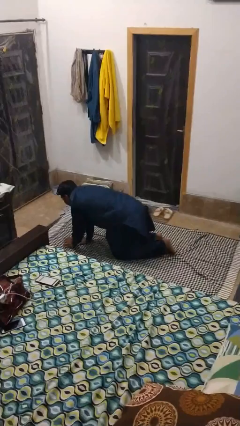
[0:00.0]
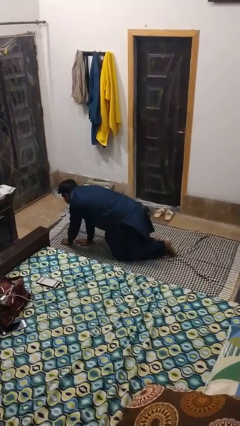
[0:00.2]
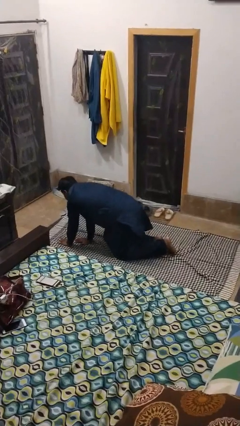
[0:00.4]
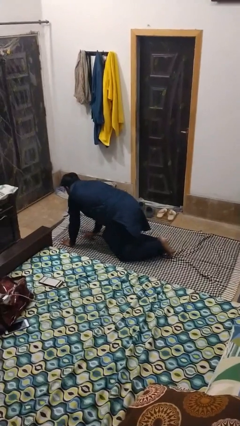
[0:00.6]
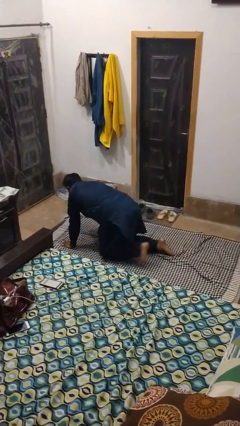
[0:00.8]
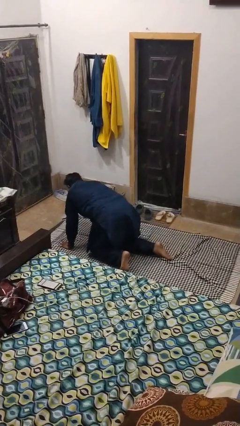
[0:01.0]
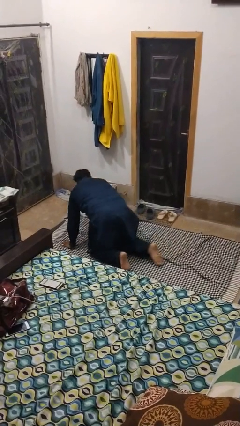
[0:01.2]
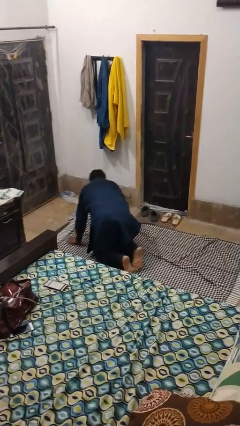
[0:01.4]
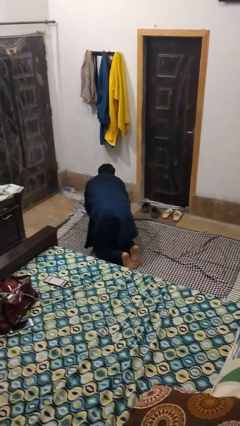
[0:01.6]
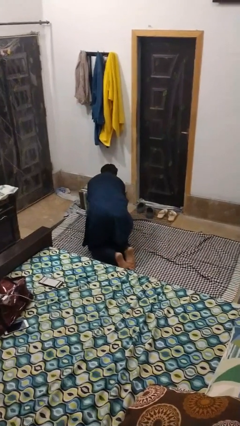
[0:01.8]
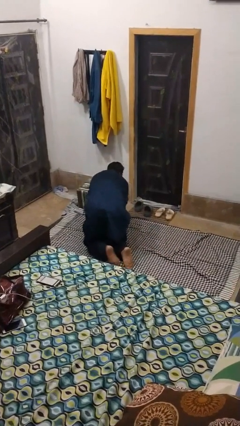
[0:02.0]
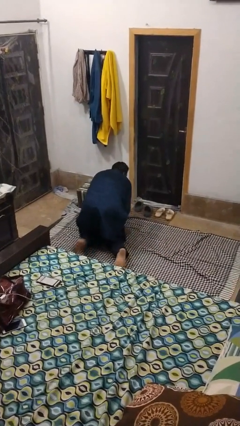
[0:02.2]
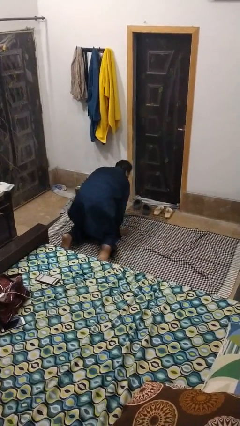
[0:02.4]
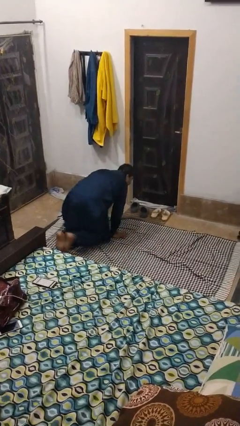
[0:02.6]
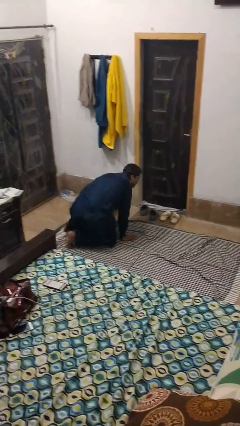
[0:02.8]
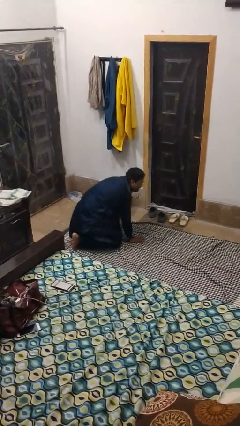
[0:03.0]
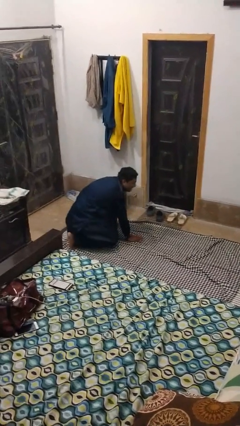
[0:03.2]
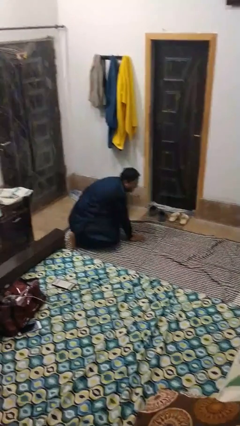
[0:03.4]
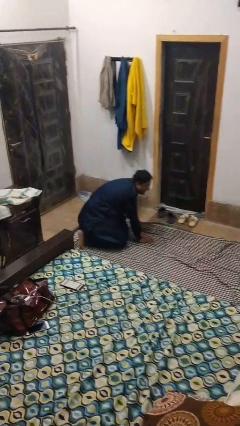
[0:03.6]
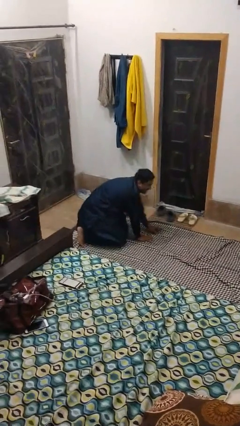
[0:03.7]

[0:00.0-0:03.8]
person crawls

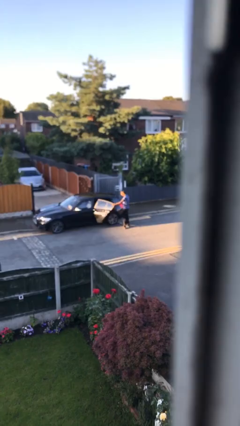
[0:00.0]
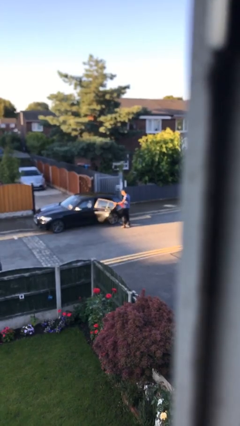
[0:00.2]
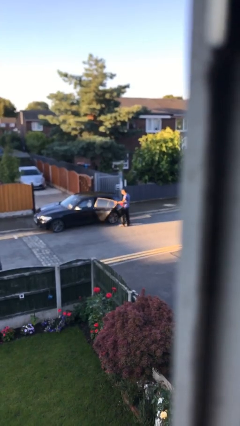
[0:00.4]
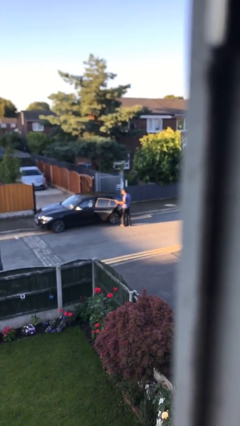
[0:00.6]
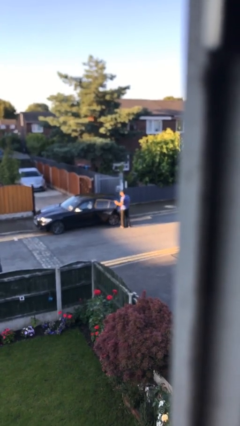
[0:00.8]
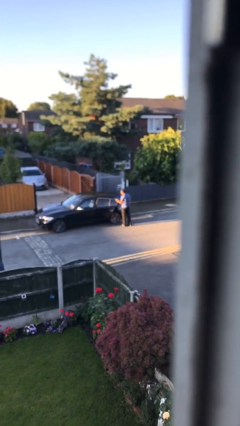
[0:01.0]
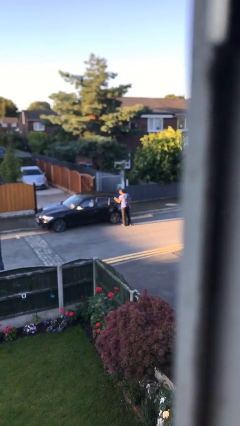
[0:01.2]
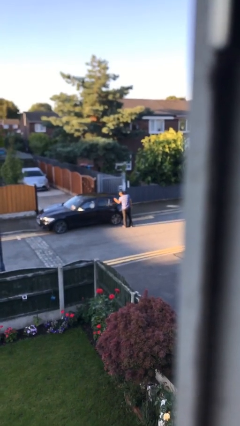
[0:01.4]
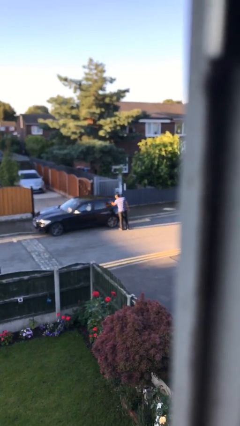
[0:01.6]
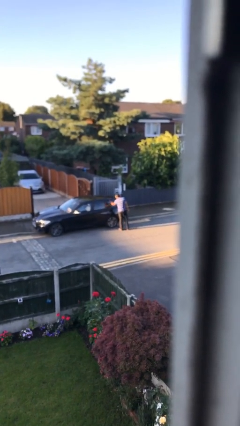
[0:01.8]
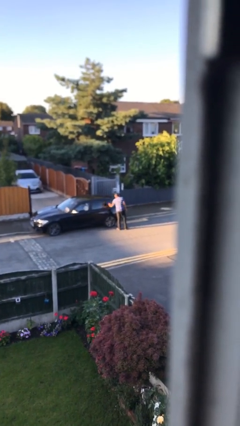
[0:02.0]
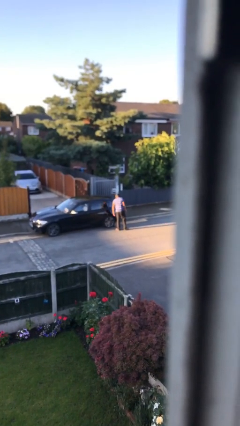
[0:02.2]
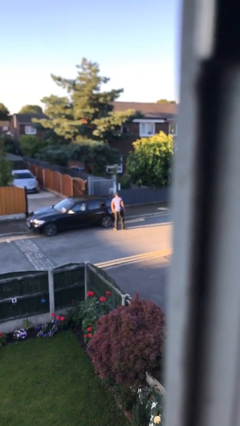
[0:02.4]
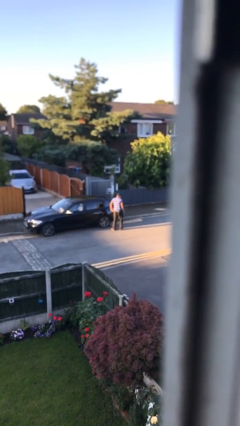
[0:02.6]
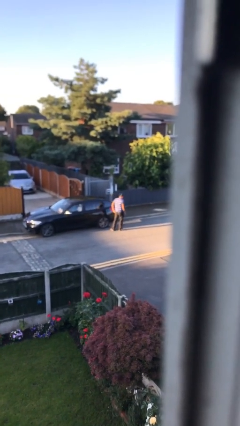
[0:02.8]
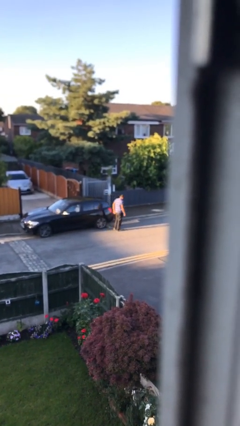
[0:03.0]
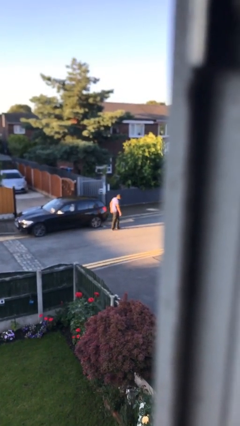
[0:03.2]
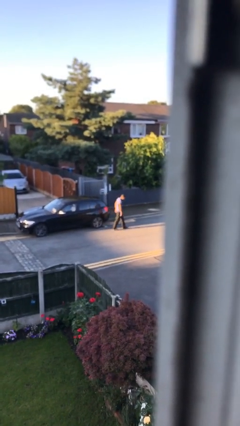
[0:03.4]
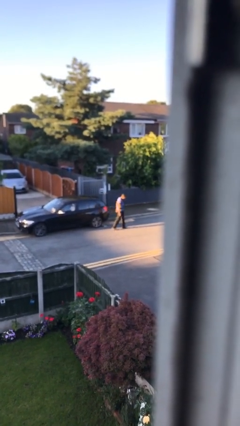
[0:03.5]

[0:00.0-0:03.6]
person closes car door

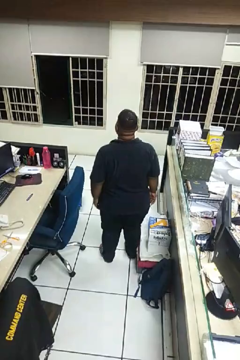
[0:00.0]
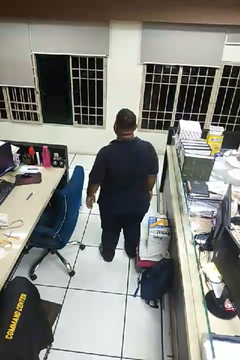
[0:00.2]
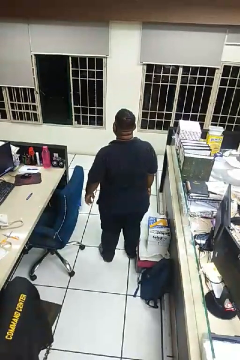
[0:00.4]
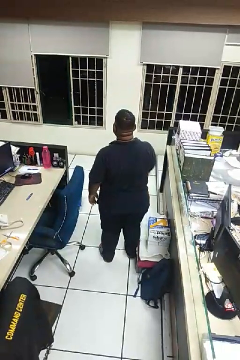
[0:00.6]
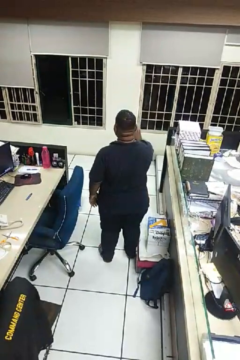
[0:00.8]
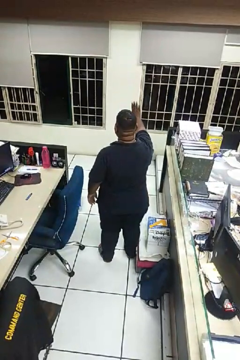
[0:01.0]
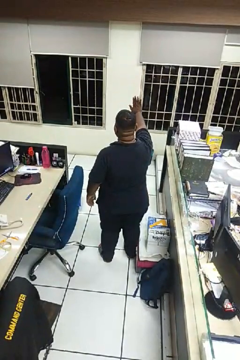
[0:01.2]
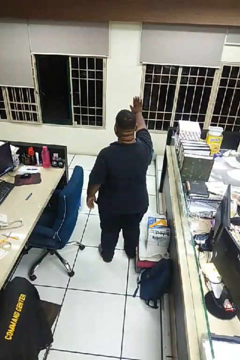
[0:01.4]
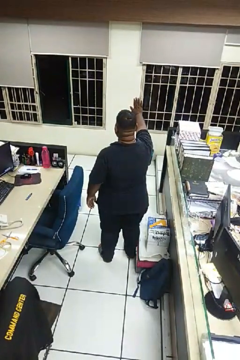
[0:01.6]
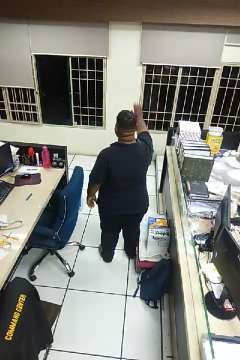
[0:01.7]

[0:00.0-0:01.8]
person gestures stop

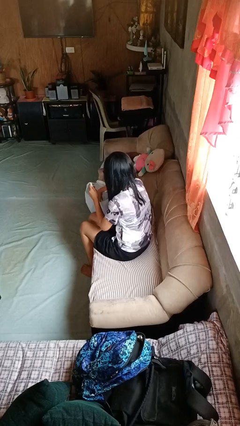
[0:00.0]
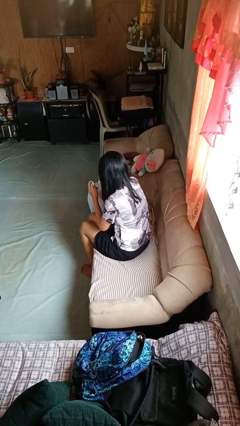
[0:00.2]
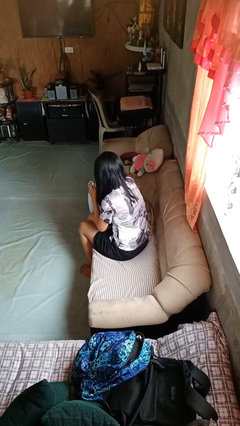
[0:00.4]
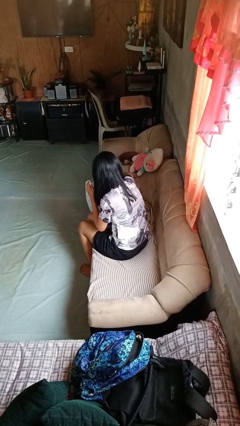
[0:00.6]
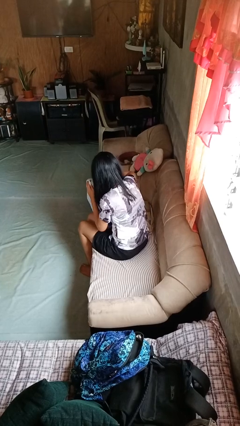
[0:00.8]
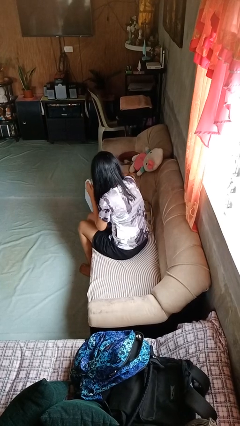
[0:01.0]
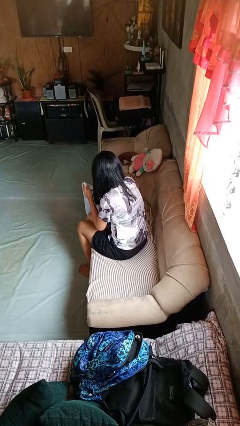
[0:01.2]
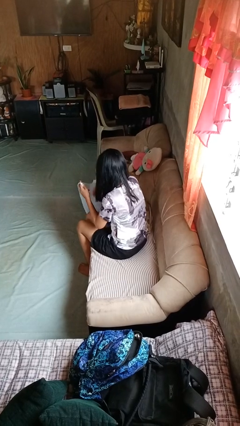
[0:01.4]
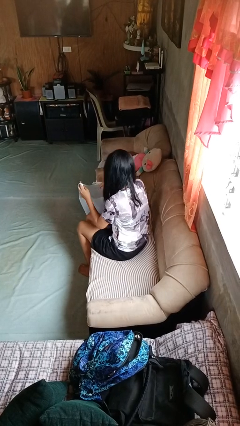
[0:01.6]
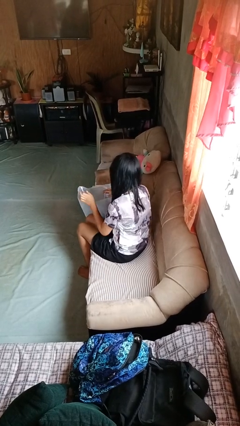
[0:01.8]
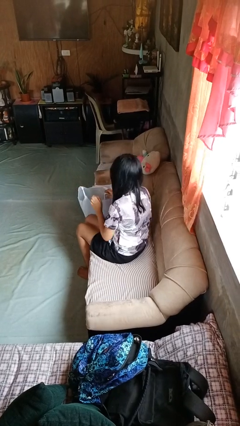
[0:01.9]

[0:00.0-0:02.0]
person searches in bag

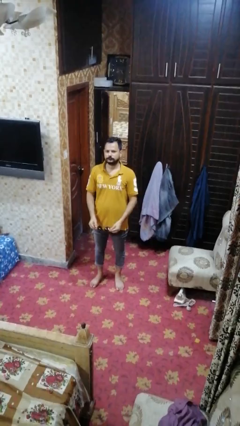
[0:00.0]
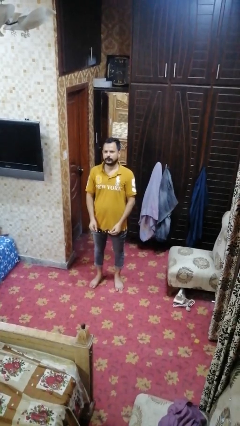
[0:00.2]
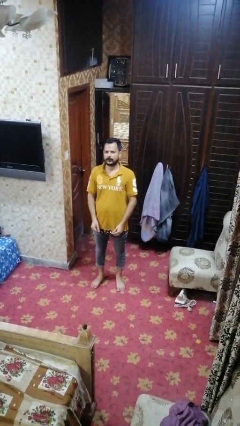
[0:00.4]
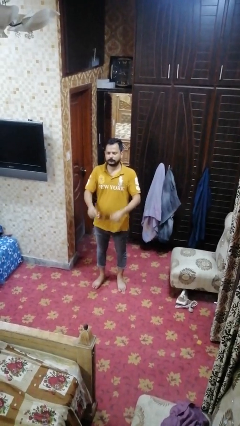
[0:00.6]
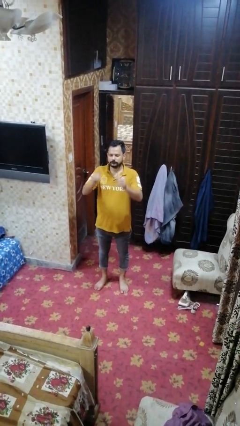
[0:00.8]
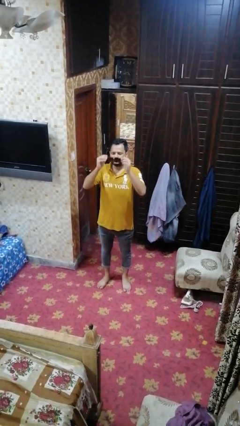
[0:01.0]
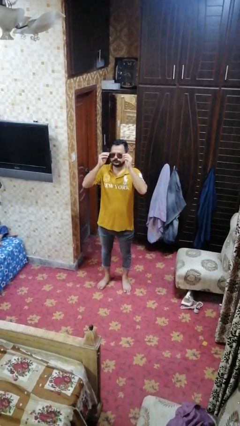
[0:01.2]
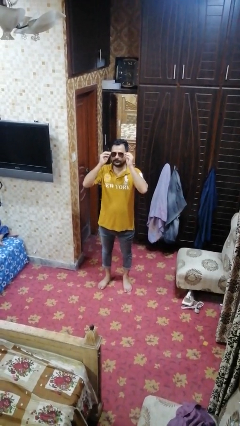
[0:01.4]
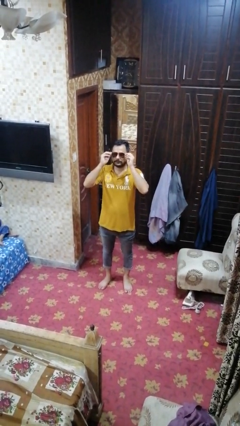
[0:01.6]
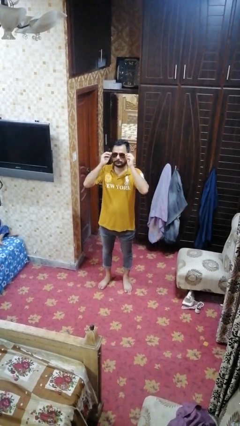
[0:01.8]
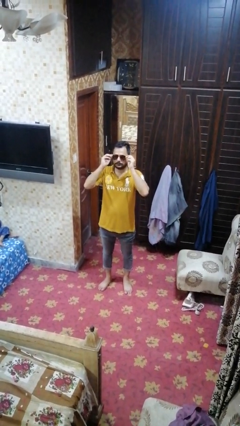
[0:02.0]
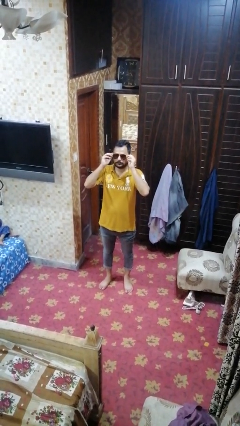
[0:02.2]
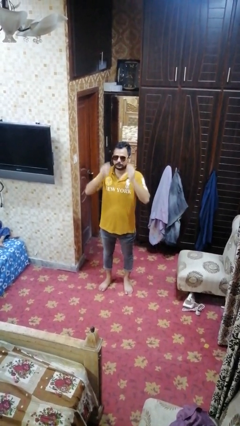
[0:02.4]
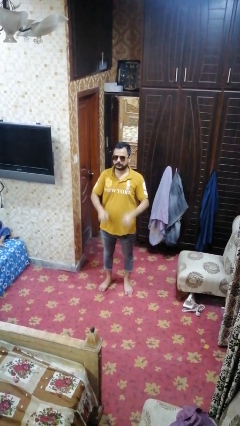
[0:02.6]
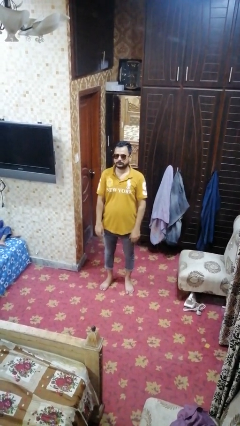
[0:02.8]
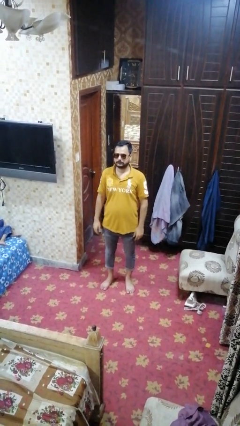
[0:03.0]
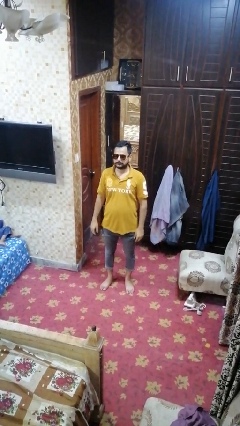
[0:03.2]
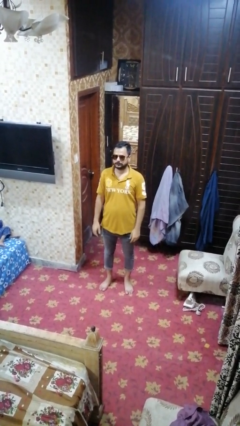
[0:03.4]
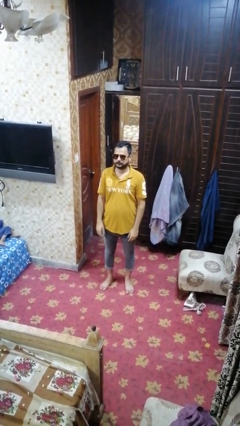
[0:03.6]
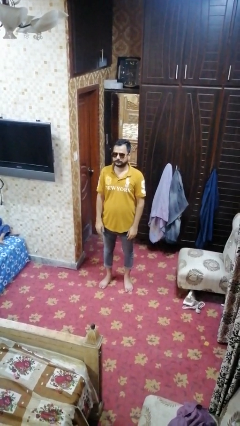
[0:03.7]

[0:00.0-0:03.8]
person puts on sunglasses

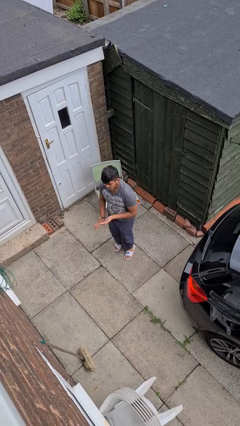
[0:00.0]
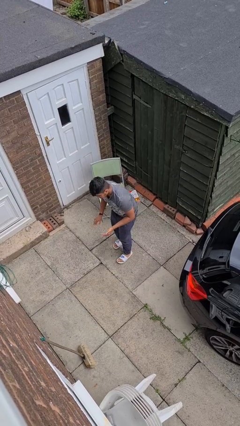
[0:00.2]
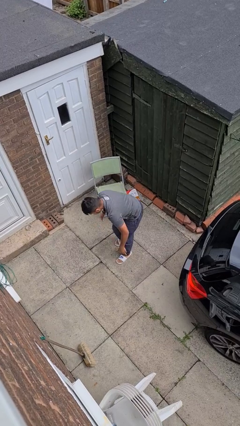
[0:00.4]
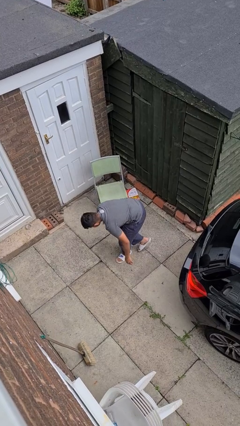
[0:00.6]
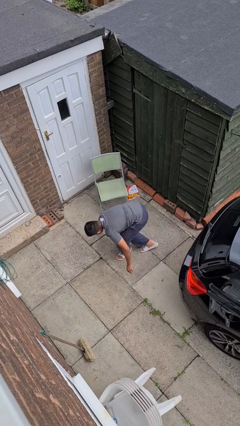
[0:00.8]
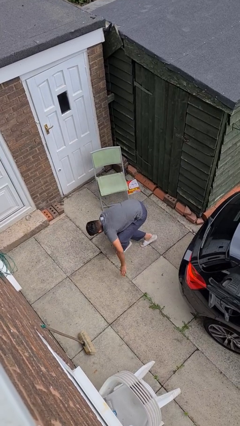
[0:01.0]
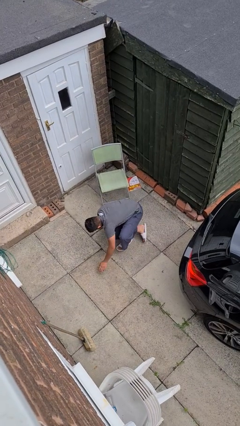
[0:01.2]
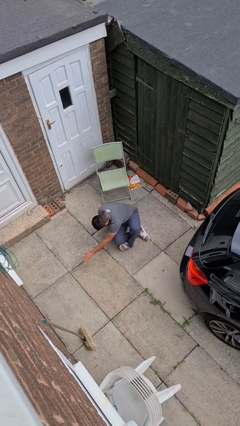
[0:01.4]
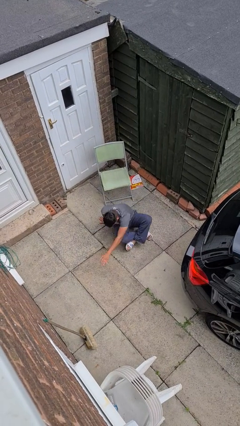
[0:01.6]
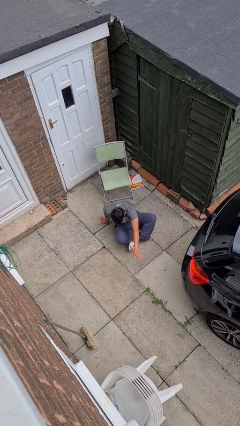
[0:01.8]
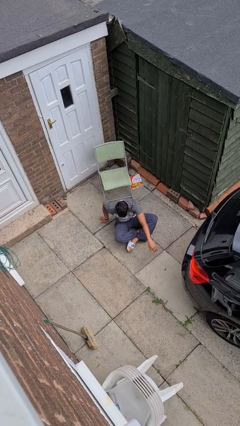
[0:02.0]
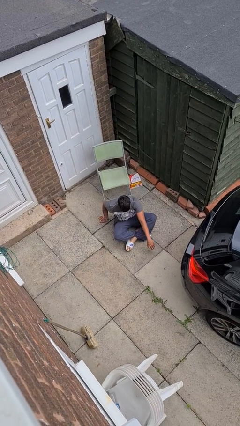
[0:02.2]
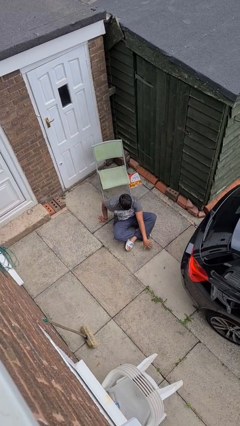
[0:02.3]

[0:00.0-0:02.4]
person sits crisscross

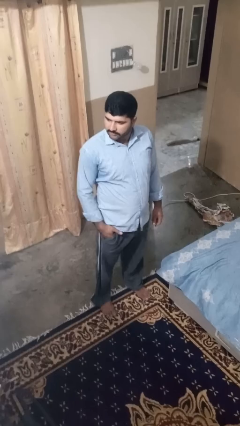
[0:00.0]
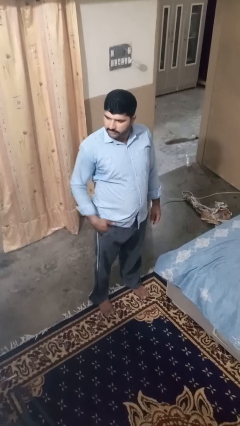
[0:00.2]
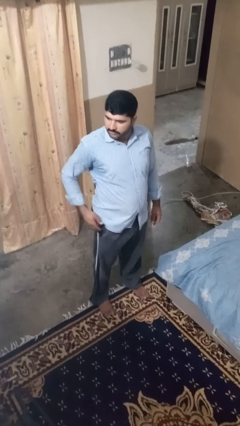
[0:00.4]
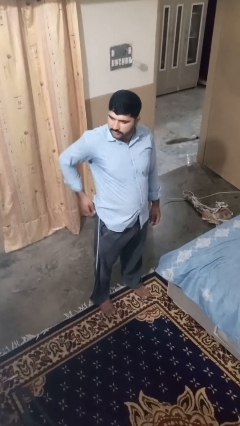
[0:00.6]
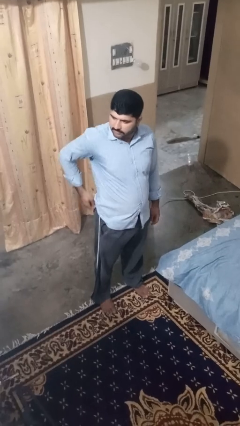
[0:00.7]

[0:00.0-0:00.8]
person puts hands in back pockets
